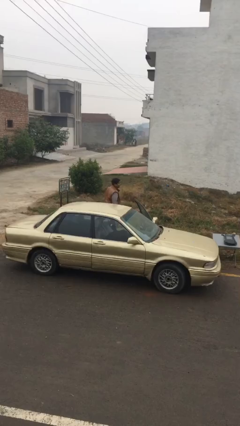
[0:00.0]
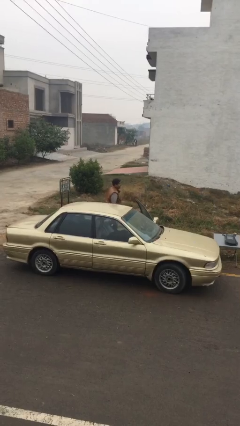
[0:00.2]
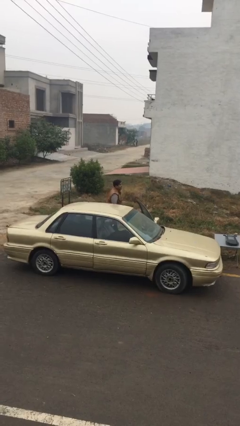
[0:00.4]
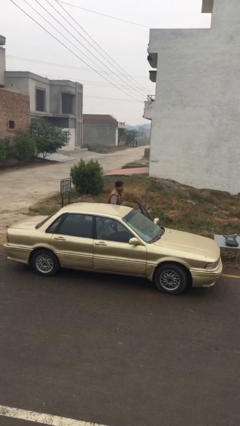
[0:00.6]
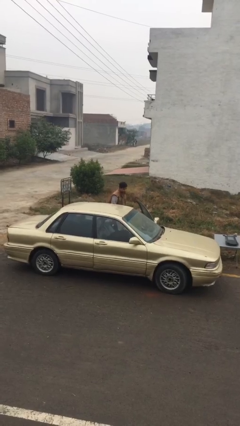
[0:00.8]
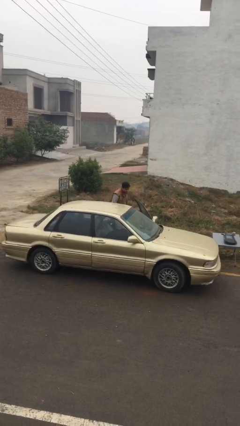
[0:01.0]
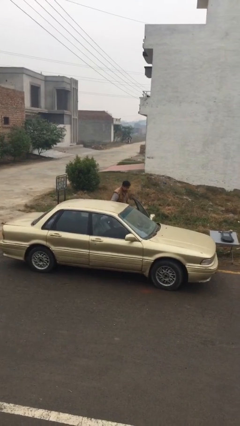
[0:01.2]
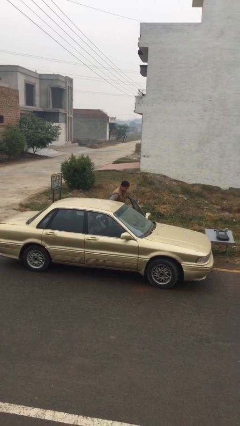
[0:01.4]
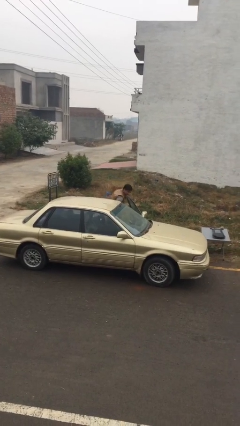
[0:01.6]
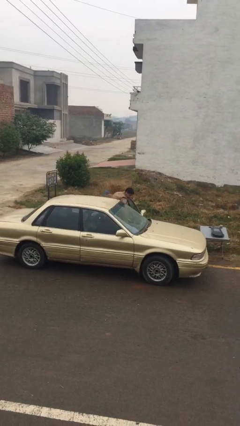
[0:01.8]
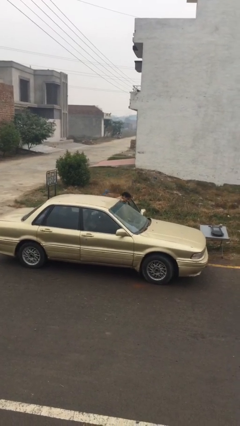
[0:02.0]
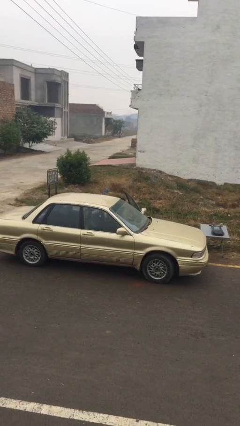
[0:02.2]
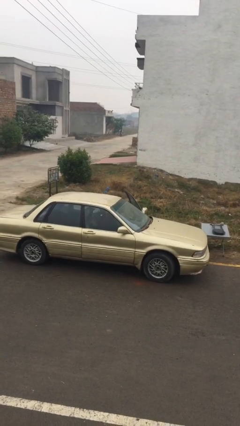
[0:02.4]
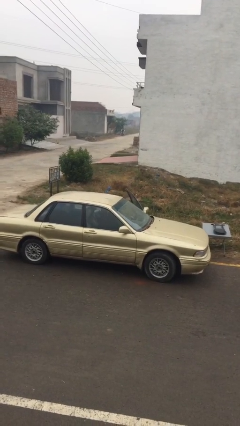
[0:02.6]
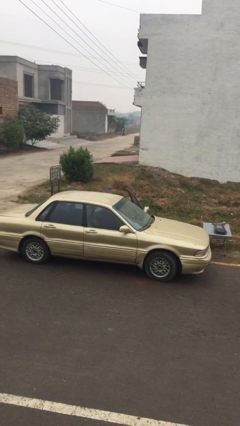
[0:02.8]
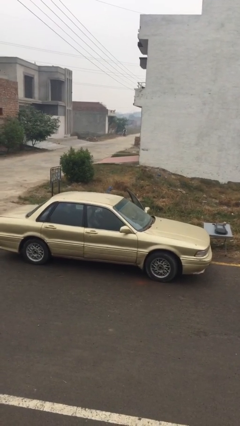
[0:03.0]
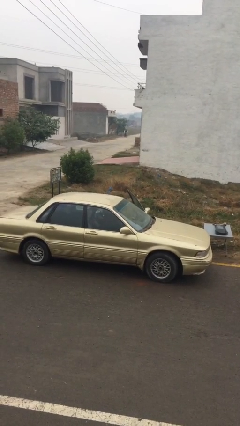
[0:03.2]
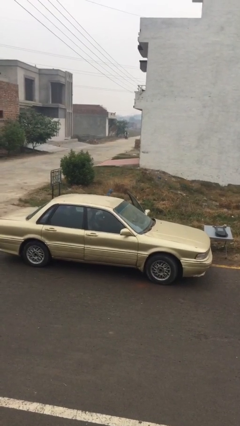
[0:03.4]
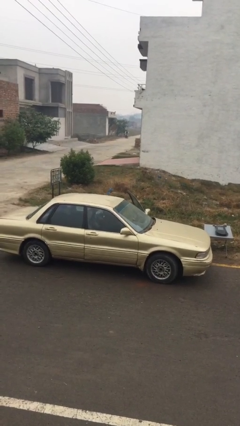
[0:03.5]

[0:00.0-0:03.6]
person enters car

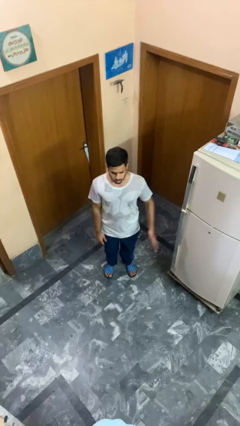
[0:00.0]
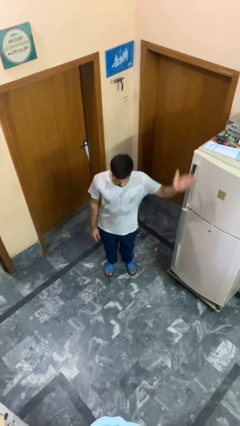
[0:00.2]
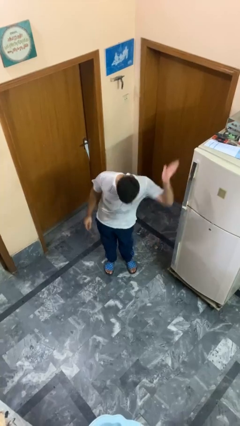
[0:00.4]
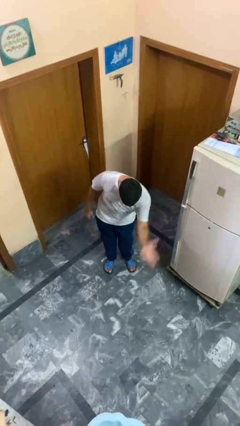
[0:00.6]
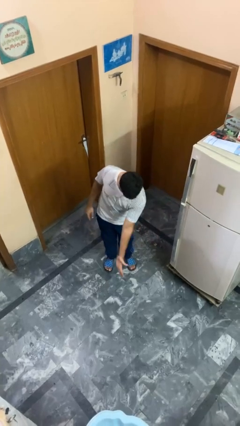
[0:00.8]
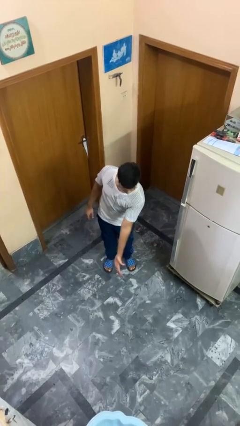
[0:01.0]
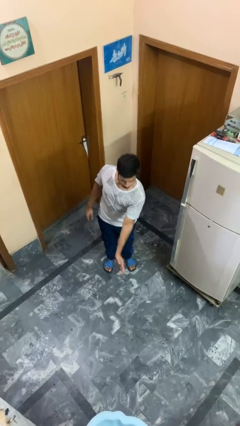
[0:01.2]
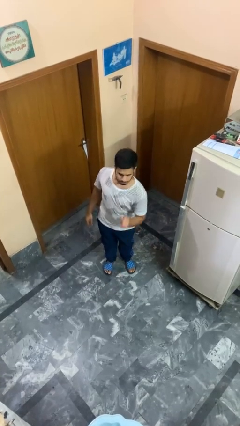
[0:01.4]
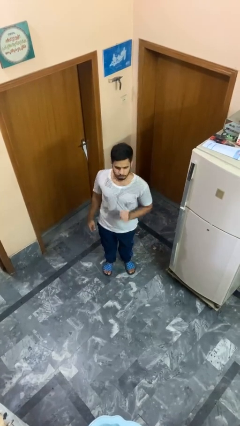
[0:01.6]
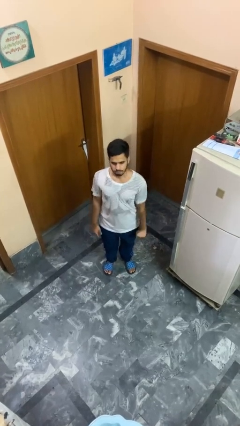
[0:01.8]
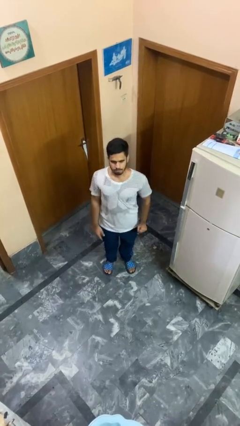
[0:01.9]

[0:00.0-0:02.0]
person karate chop

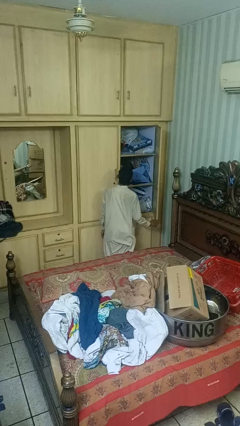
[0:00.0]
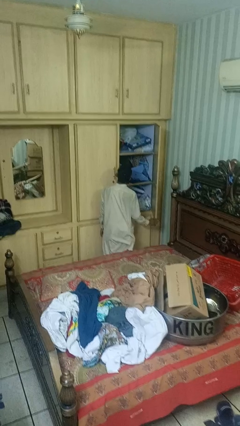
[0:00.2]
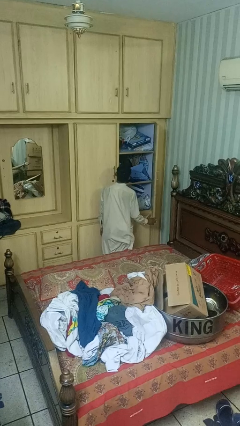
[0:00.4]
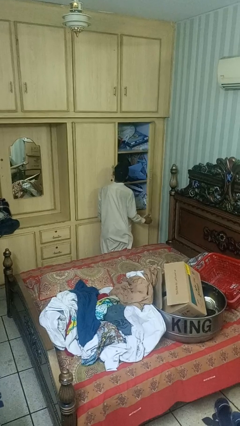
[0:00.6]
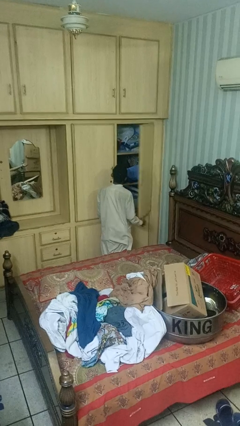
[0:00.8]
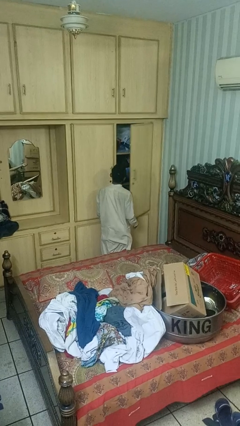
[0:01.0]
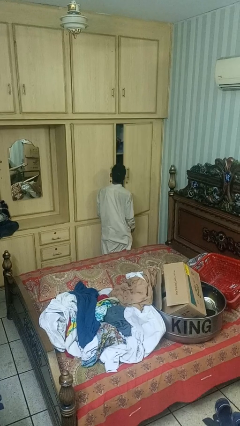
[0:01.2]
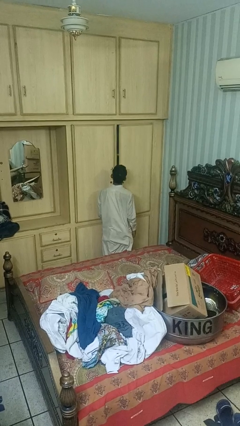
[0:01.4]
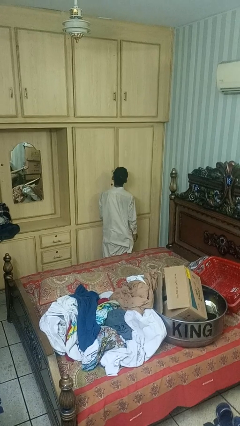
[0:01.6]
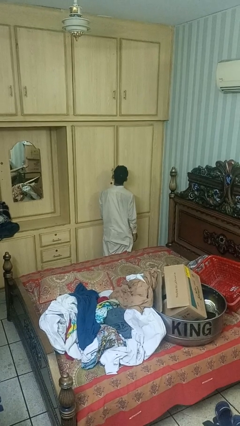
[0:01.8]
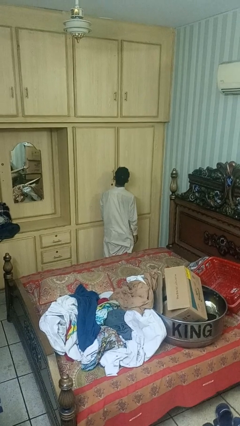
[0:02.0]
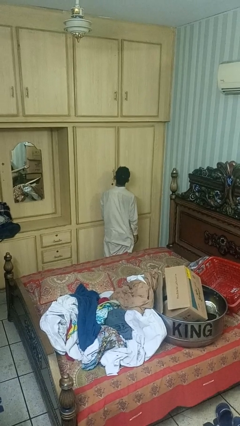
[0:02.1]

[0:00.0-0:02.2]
person closes closet door

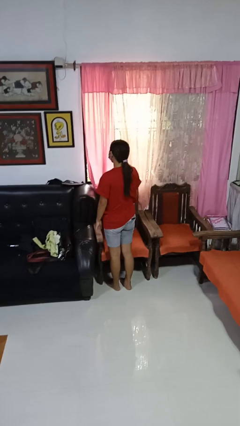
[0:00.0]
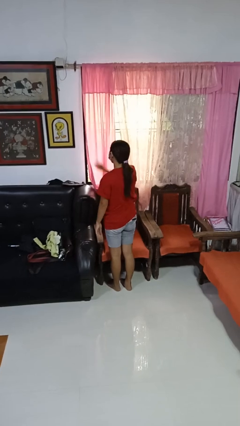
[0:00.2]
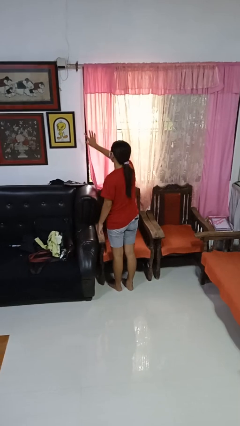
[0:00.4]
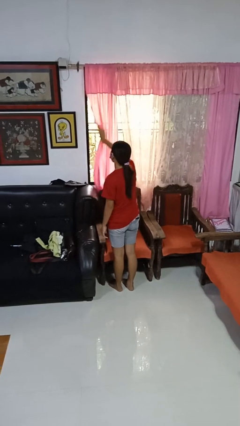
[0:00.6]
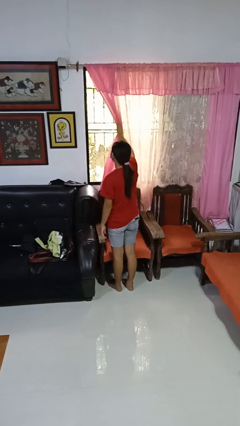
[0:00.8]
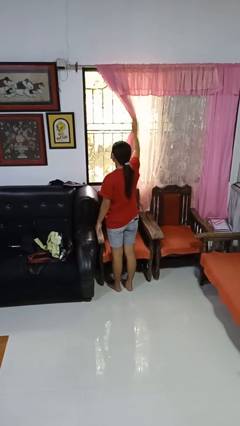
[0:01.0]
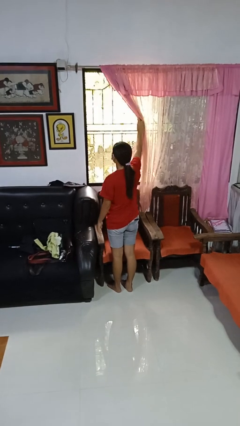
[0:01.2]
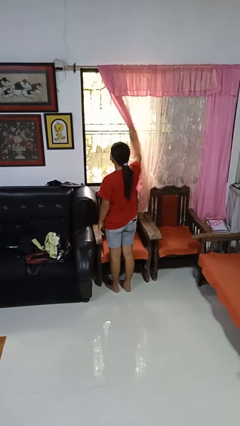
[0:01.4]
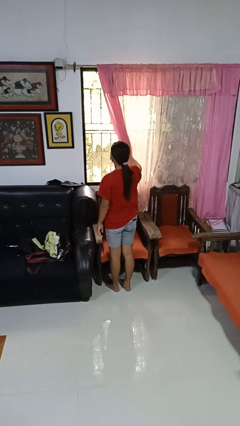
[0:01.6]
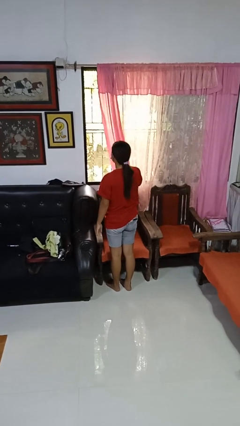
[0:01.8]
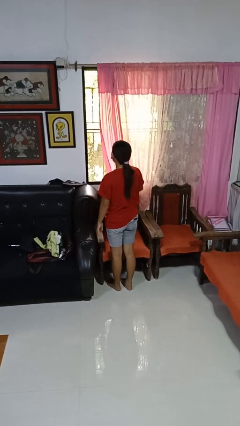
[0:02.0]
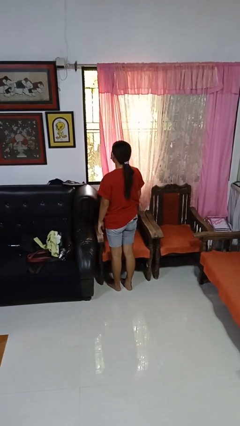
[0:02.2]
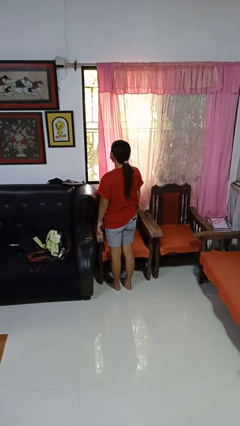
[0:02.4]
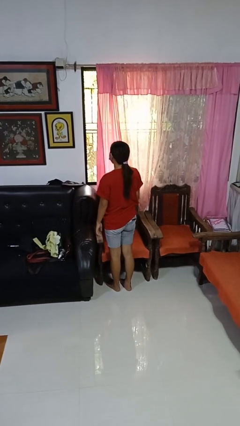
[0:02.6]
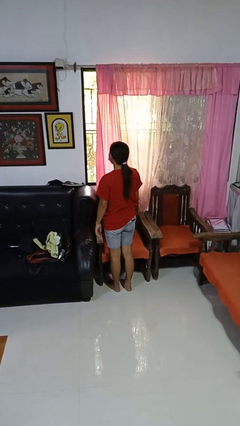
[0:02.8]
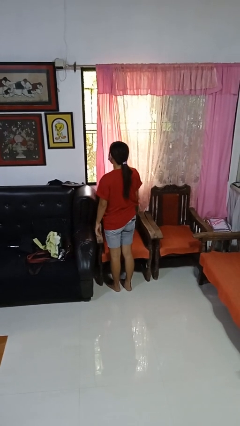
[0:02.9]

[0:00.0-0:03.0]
person opens curtains

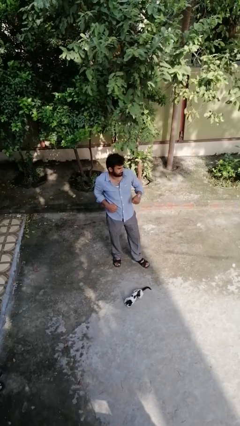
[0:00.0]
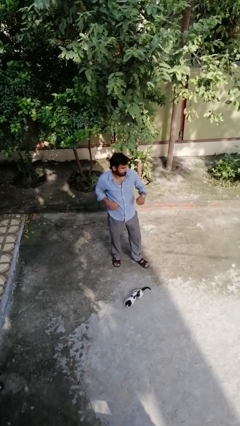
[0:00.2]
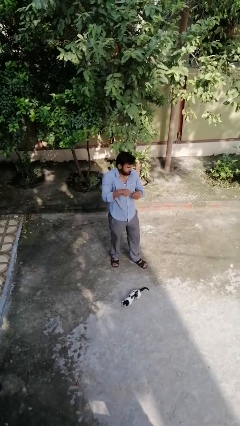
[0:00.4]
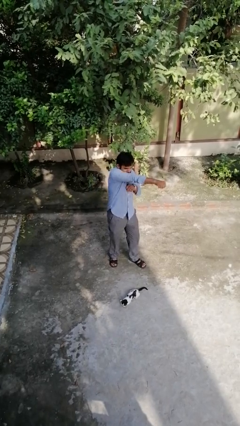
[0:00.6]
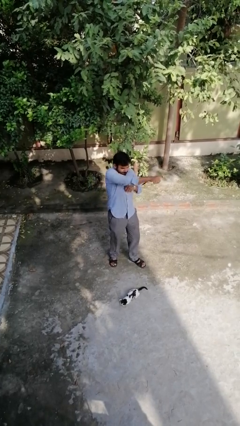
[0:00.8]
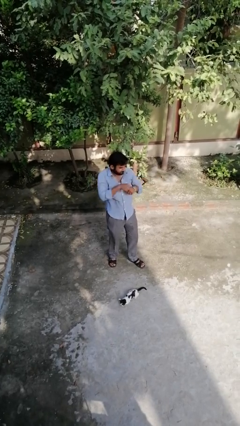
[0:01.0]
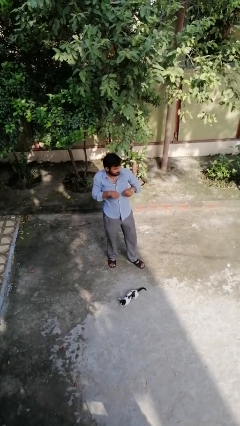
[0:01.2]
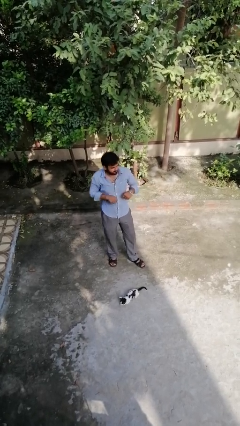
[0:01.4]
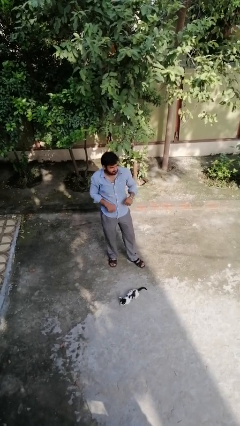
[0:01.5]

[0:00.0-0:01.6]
person punches

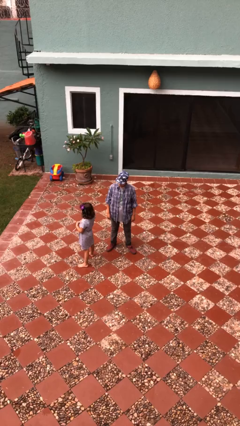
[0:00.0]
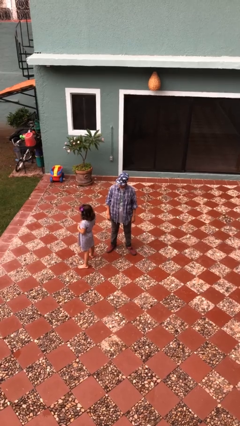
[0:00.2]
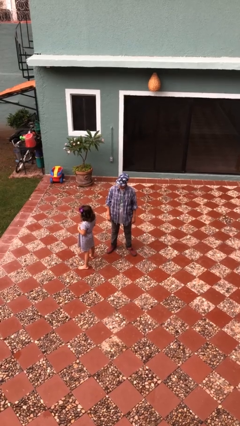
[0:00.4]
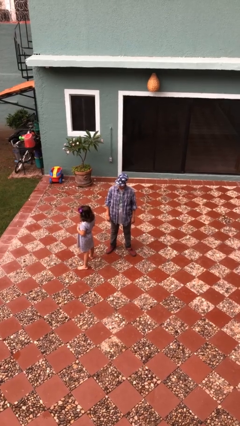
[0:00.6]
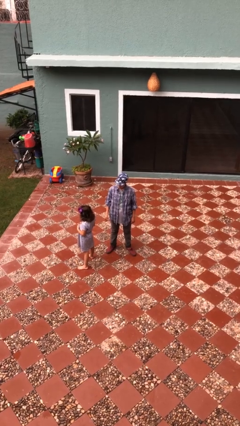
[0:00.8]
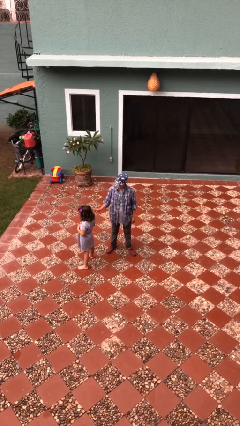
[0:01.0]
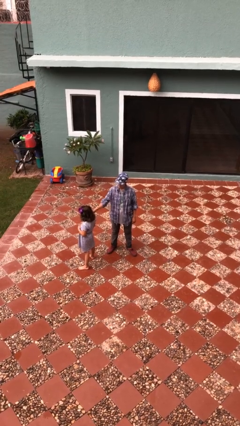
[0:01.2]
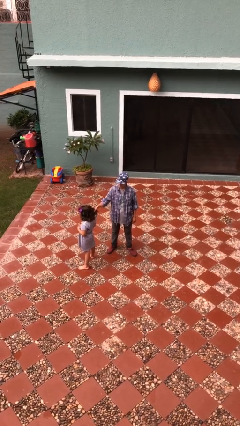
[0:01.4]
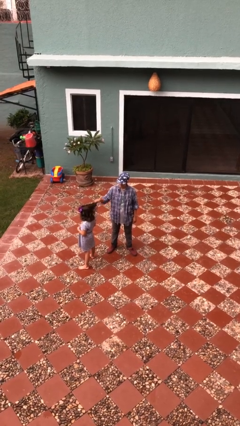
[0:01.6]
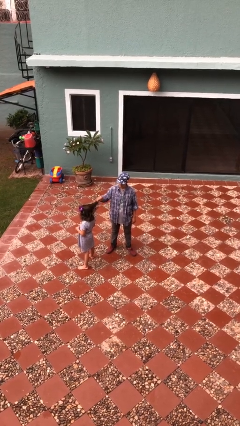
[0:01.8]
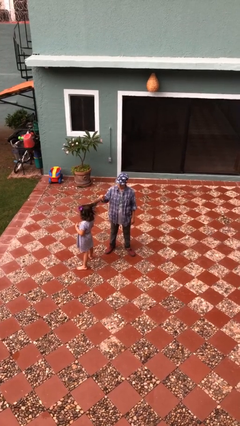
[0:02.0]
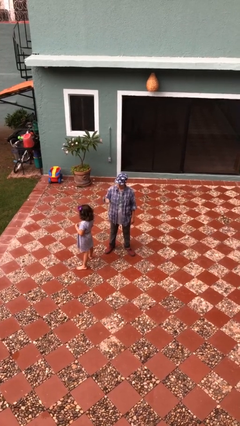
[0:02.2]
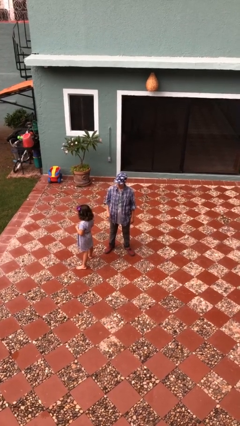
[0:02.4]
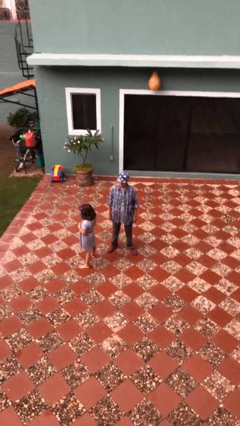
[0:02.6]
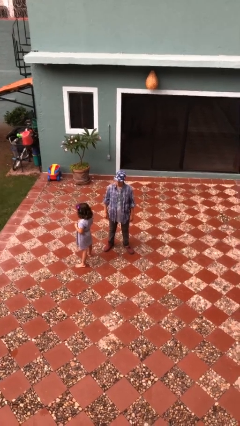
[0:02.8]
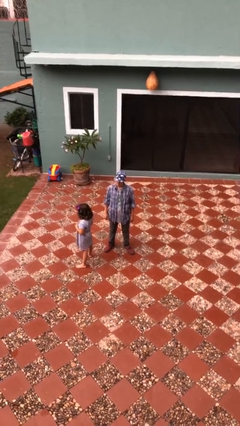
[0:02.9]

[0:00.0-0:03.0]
person grabs person by hair

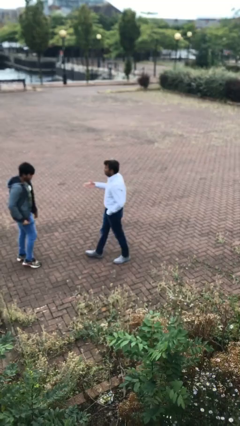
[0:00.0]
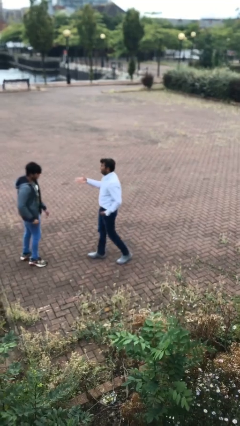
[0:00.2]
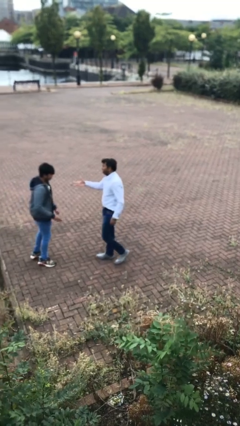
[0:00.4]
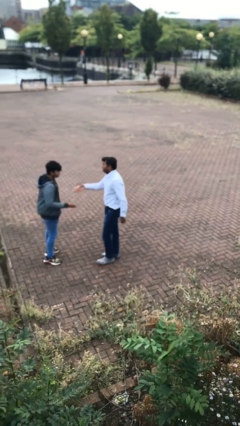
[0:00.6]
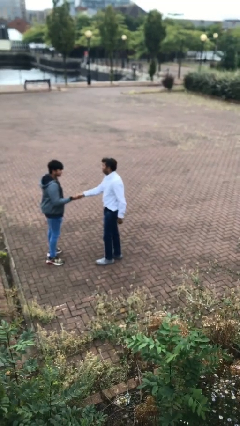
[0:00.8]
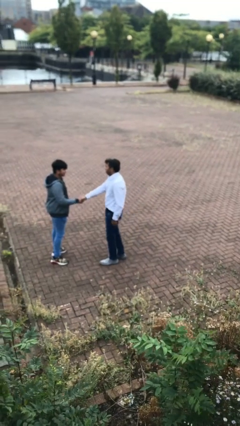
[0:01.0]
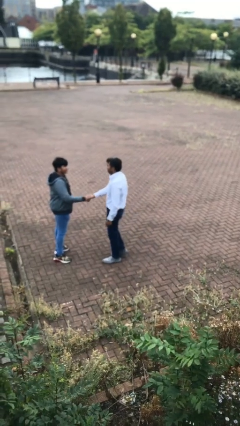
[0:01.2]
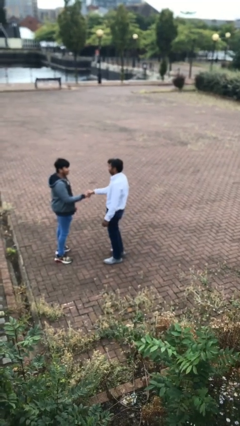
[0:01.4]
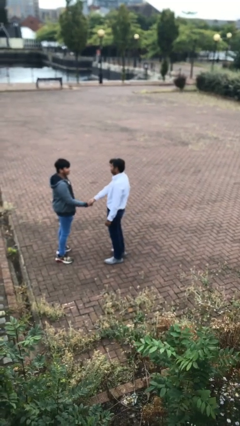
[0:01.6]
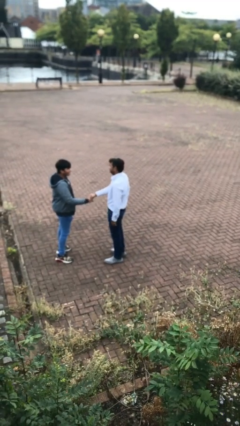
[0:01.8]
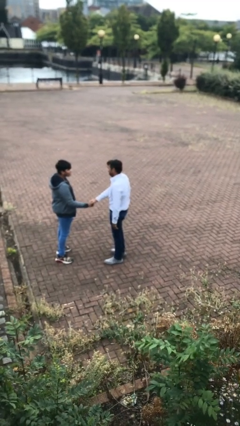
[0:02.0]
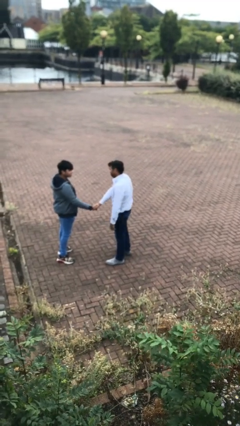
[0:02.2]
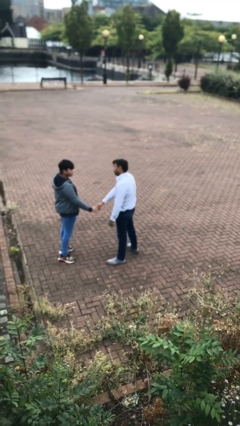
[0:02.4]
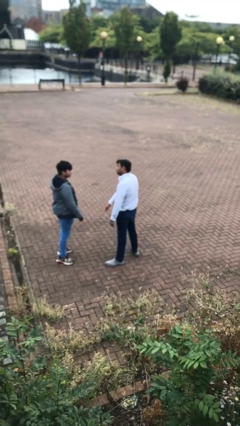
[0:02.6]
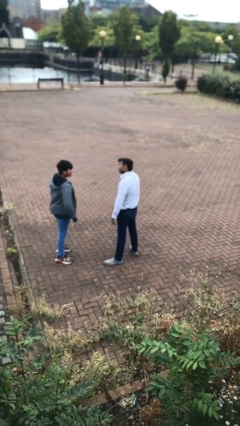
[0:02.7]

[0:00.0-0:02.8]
person shakes hand
